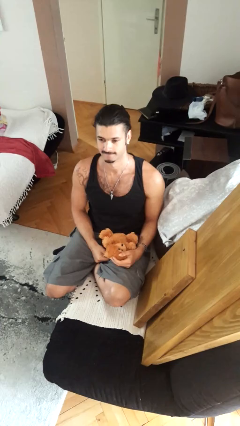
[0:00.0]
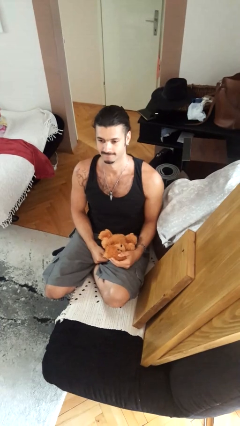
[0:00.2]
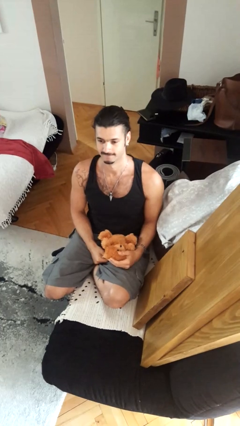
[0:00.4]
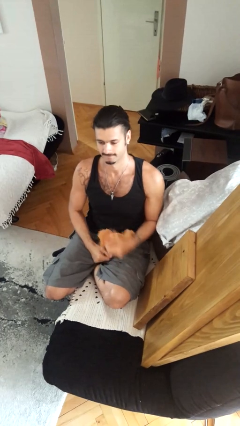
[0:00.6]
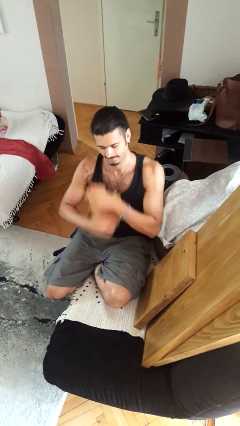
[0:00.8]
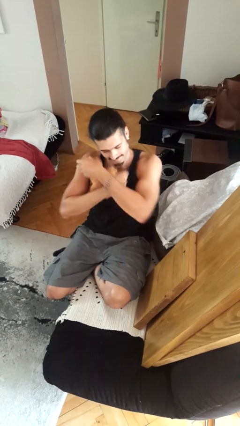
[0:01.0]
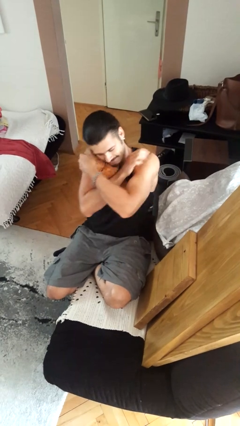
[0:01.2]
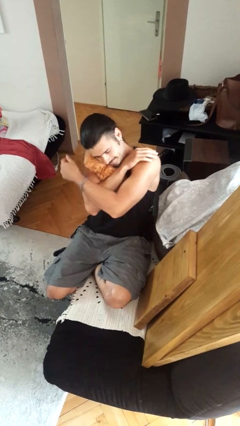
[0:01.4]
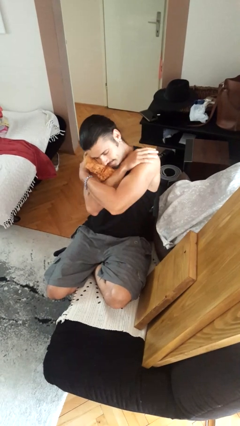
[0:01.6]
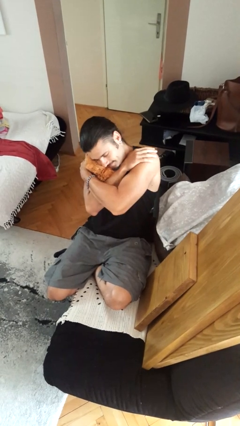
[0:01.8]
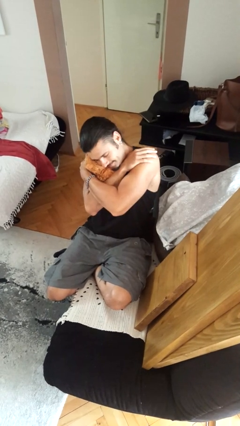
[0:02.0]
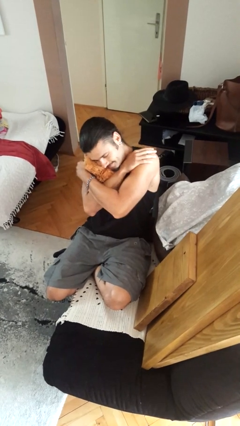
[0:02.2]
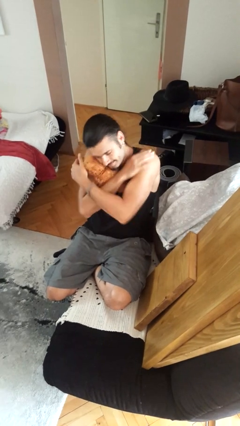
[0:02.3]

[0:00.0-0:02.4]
person hugs stuffed animal

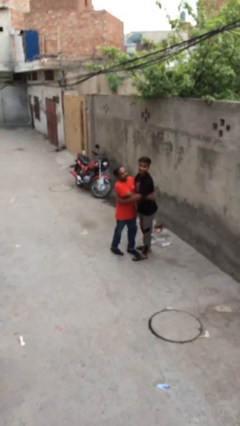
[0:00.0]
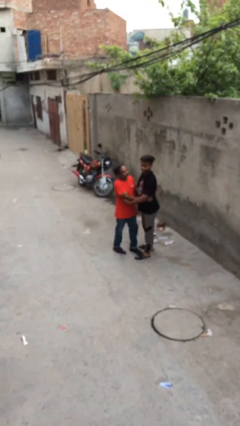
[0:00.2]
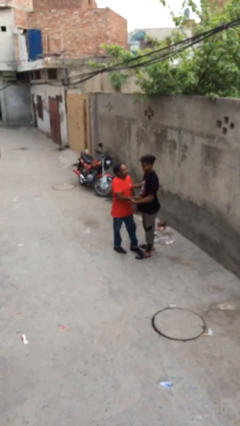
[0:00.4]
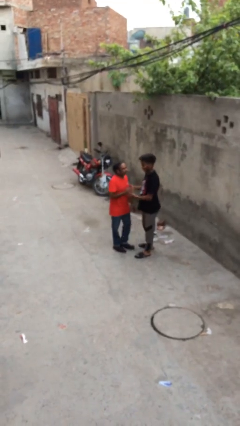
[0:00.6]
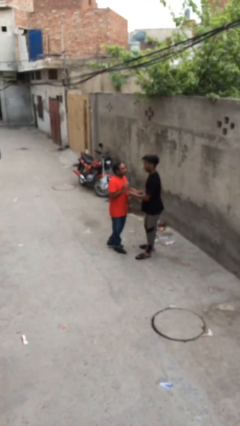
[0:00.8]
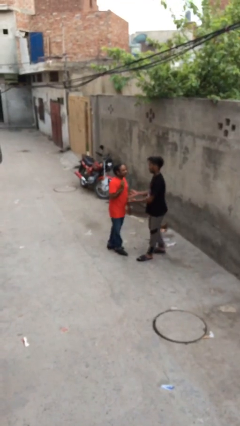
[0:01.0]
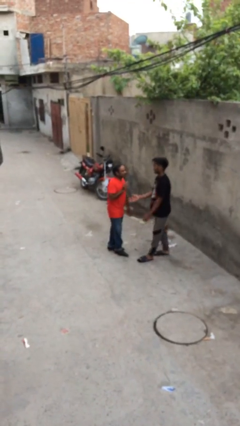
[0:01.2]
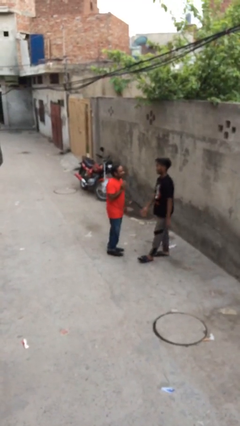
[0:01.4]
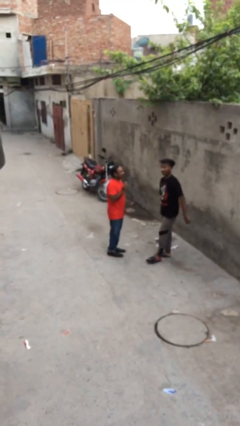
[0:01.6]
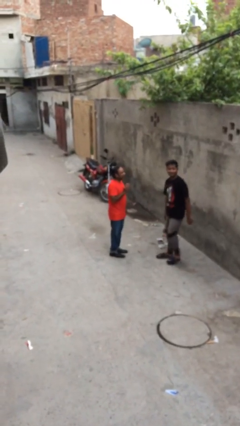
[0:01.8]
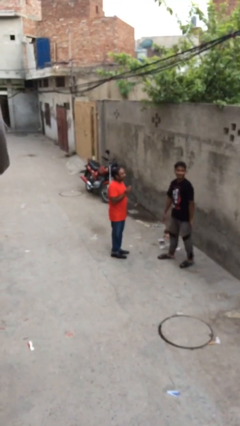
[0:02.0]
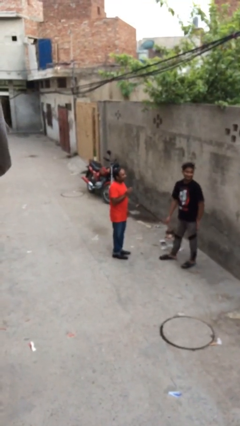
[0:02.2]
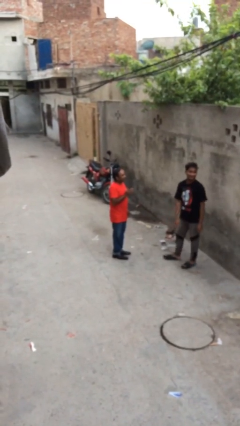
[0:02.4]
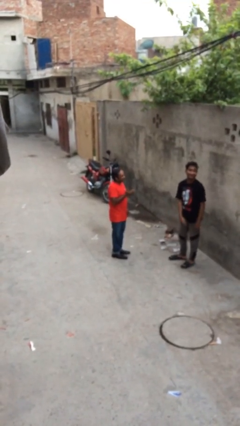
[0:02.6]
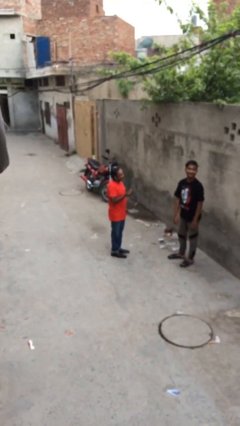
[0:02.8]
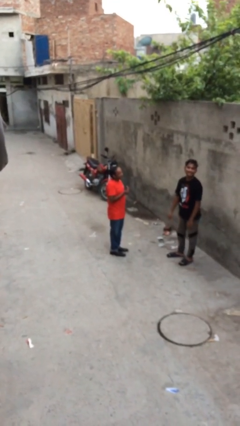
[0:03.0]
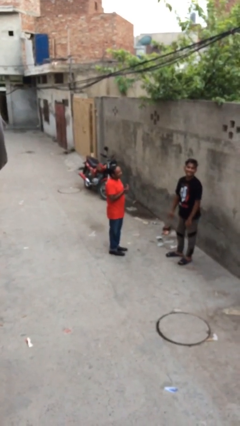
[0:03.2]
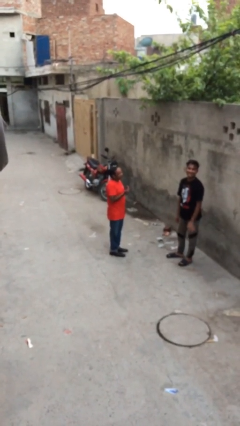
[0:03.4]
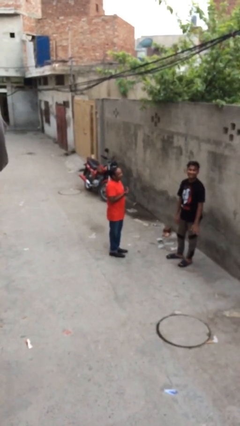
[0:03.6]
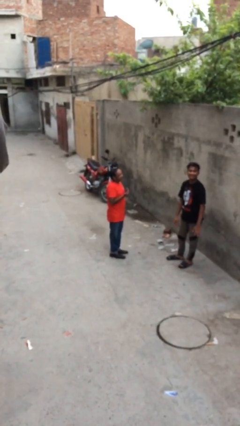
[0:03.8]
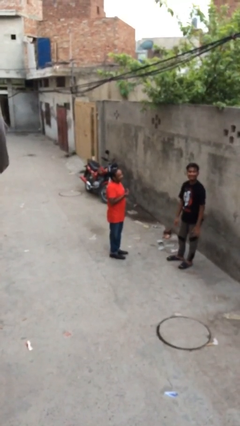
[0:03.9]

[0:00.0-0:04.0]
person talks to person

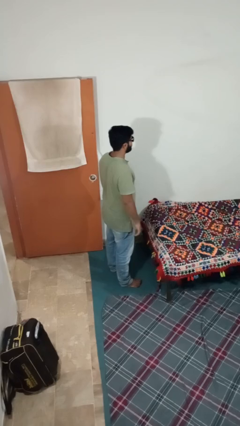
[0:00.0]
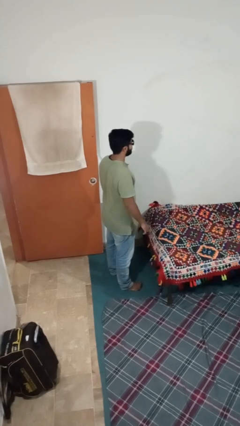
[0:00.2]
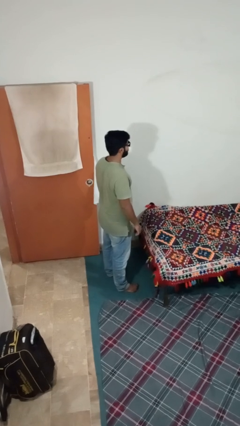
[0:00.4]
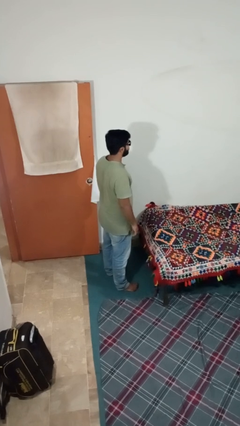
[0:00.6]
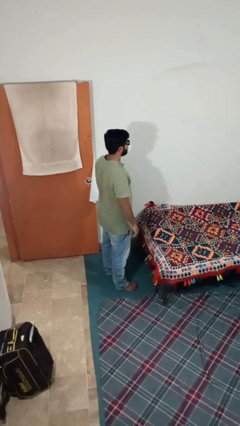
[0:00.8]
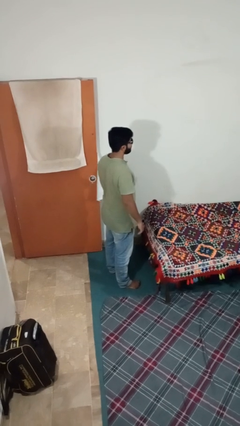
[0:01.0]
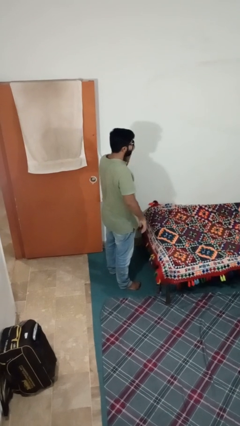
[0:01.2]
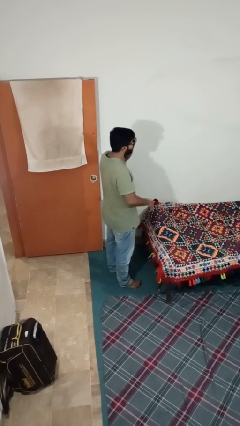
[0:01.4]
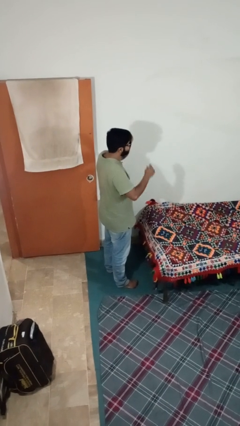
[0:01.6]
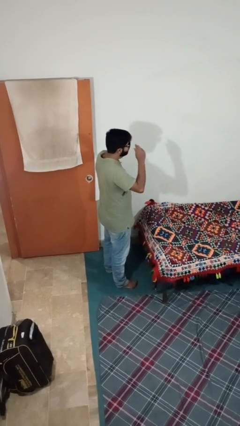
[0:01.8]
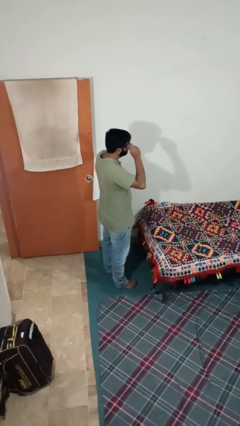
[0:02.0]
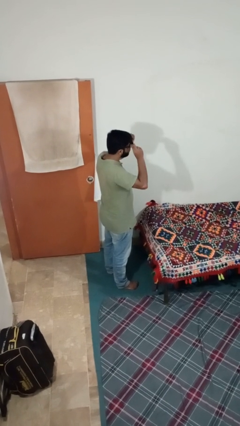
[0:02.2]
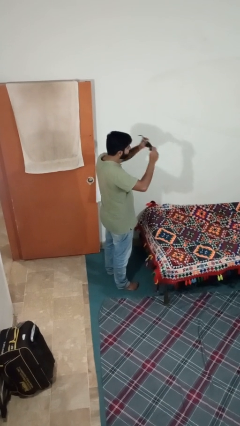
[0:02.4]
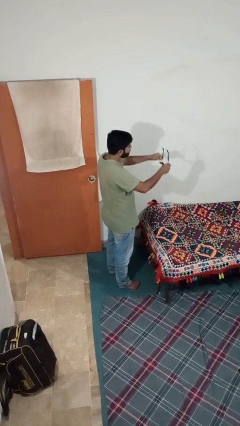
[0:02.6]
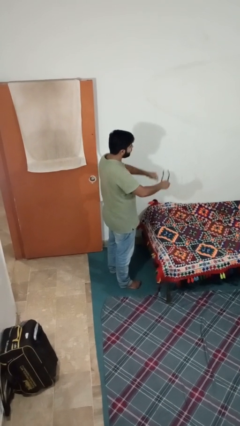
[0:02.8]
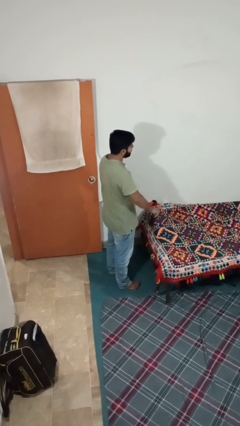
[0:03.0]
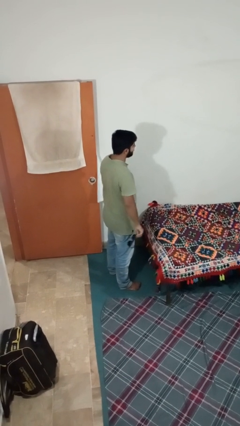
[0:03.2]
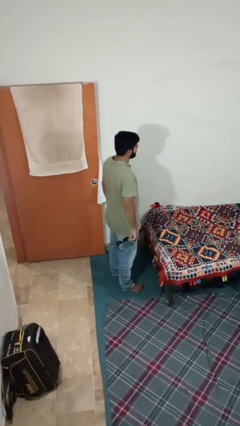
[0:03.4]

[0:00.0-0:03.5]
person takes off sunglasses

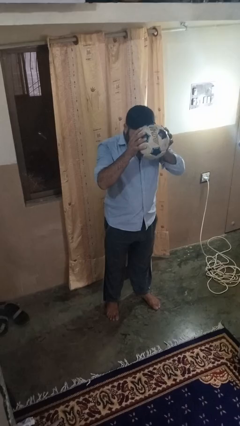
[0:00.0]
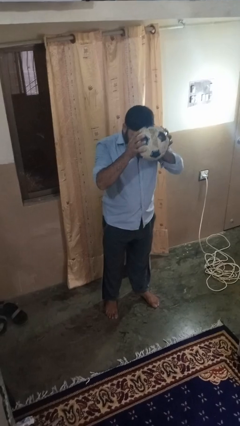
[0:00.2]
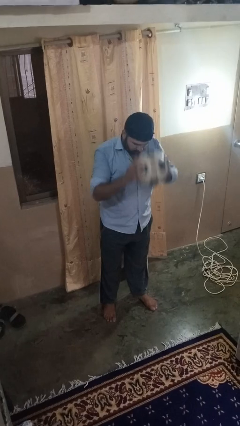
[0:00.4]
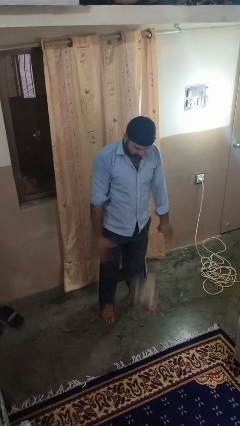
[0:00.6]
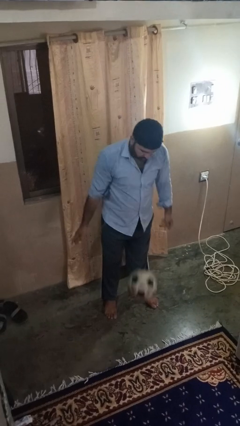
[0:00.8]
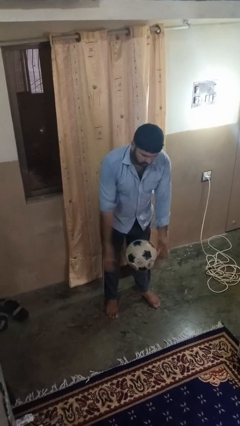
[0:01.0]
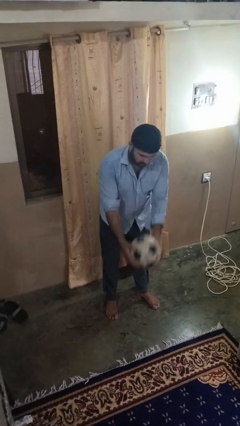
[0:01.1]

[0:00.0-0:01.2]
person bounces ball on floor

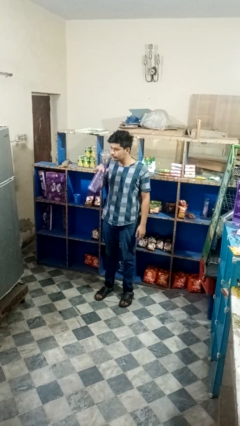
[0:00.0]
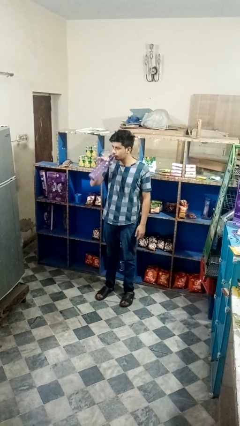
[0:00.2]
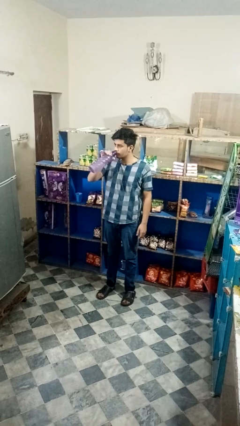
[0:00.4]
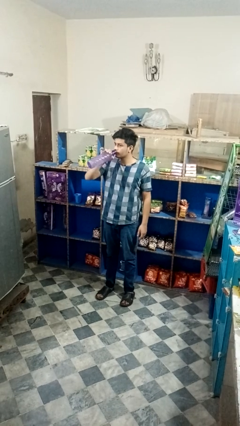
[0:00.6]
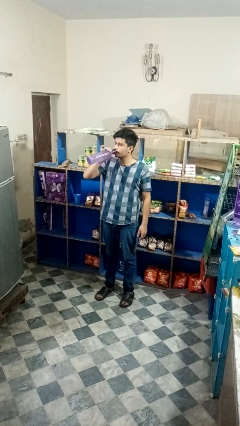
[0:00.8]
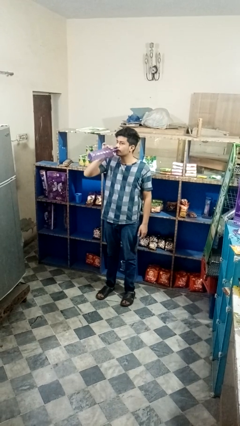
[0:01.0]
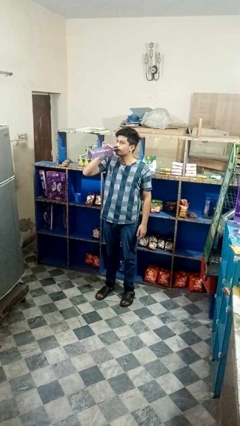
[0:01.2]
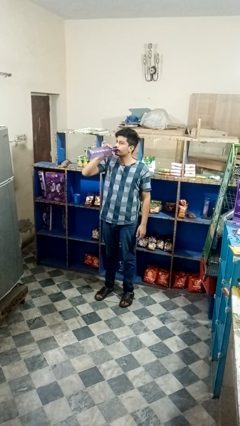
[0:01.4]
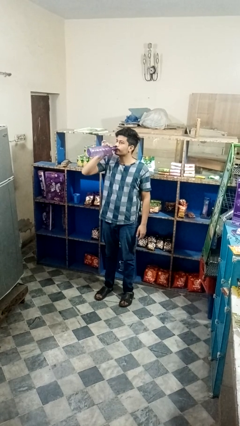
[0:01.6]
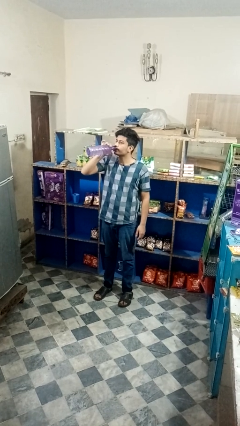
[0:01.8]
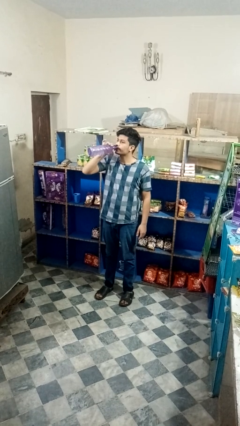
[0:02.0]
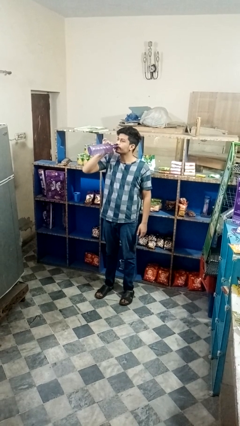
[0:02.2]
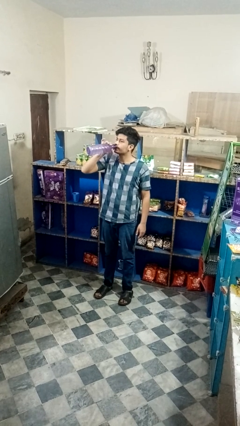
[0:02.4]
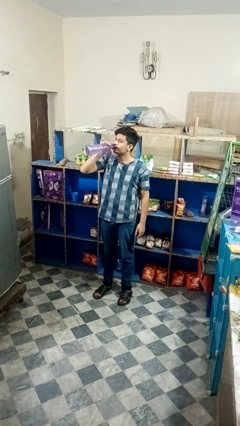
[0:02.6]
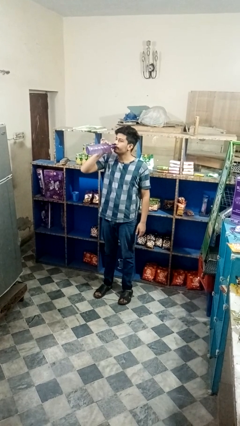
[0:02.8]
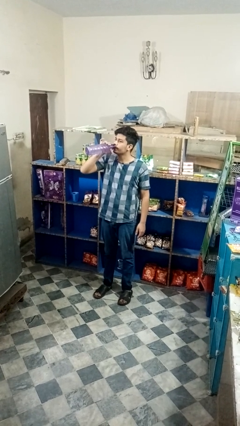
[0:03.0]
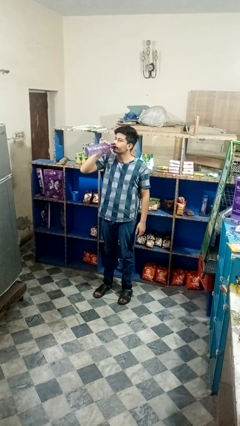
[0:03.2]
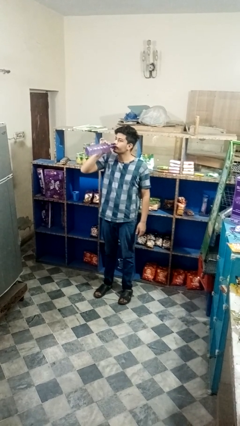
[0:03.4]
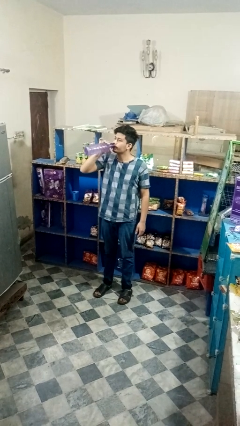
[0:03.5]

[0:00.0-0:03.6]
person drinks from bottle

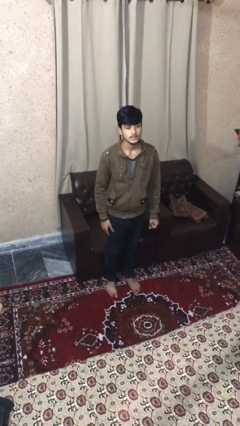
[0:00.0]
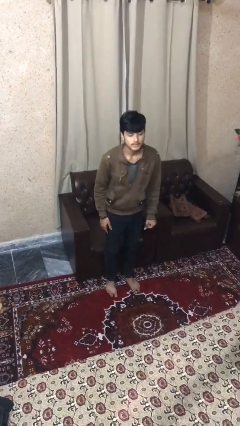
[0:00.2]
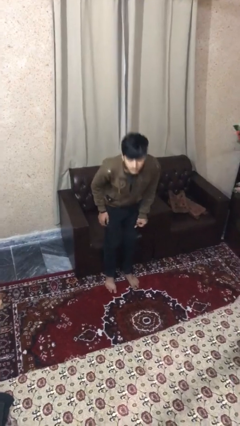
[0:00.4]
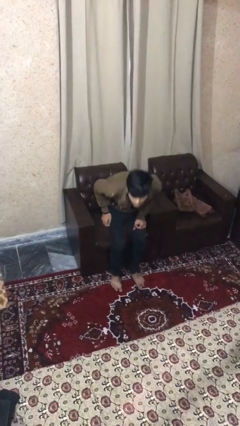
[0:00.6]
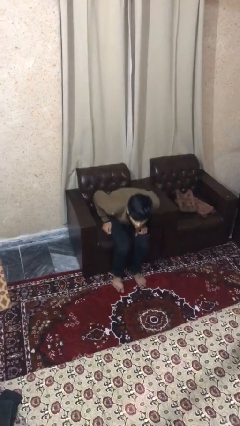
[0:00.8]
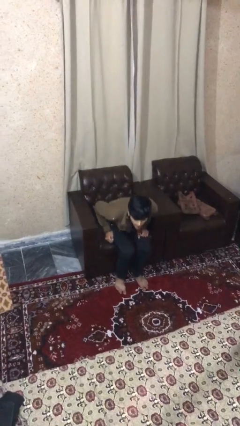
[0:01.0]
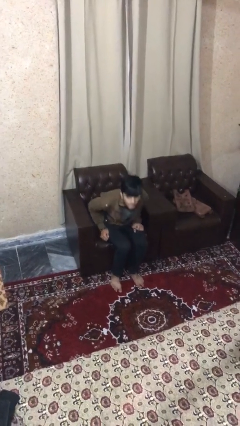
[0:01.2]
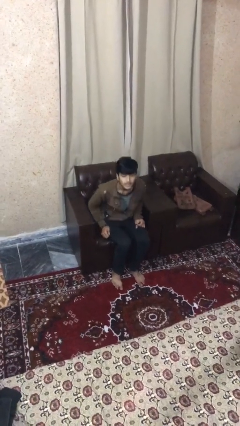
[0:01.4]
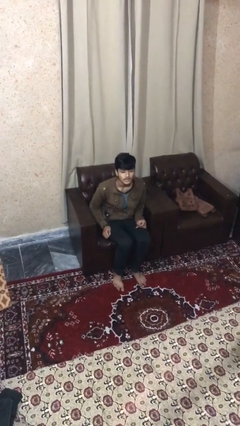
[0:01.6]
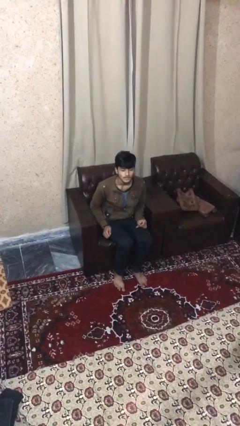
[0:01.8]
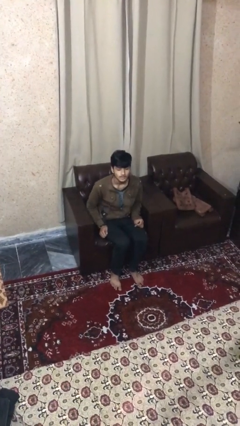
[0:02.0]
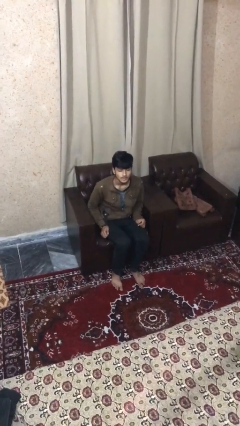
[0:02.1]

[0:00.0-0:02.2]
person sits down

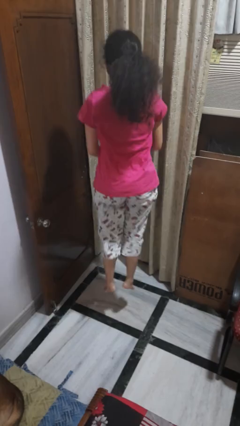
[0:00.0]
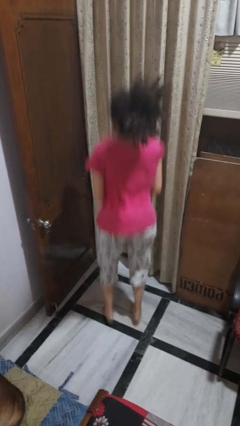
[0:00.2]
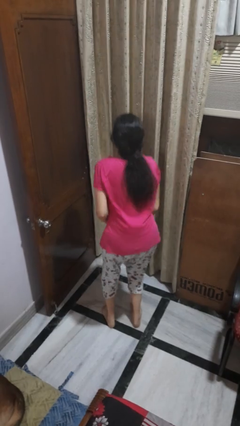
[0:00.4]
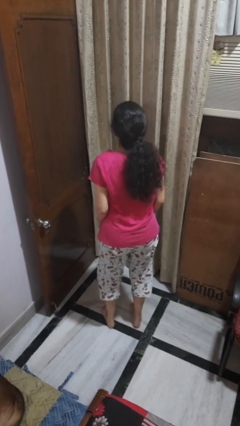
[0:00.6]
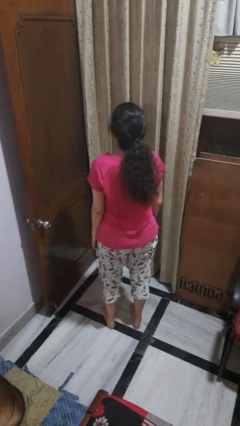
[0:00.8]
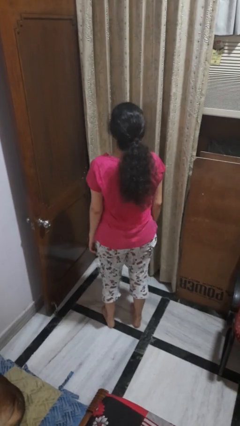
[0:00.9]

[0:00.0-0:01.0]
person jumps
